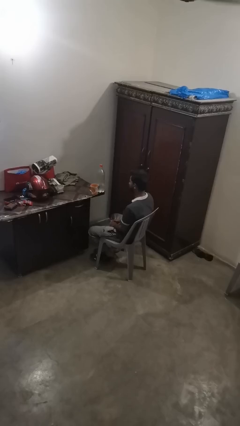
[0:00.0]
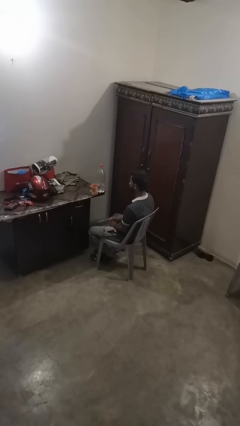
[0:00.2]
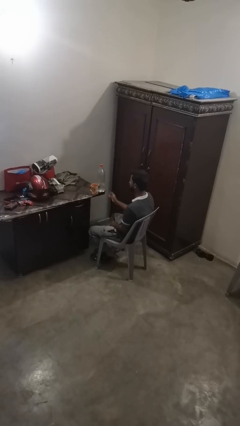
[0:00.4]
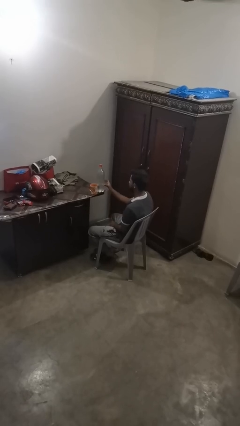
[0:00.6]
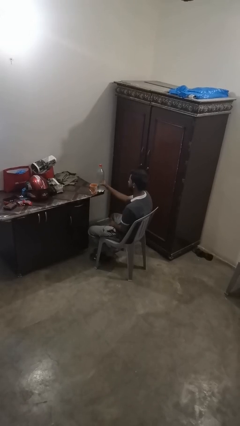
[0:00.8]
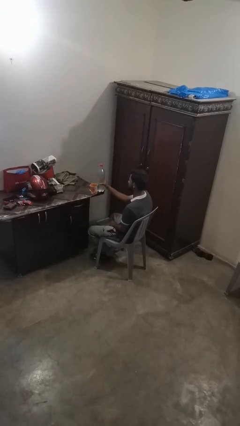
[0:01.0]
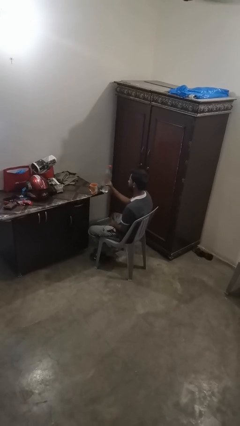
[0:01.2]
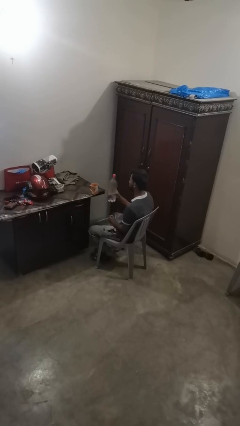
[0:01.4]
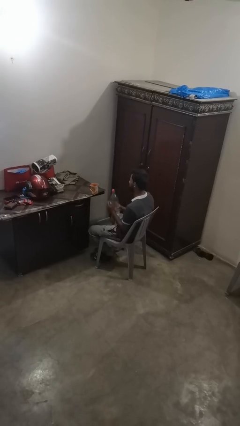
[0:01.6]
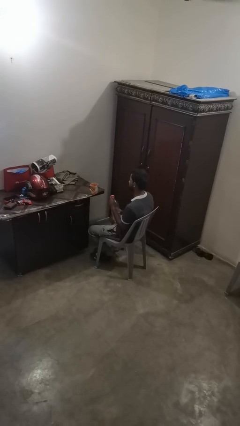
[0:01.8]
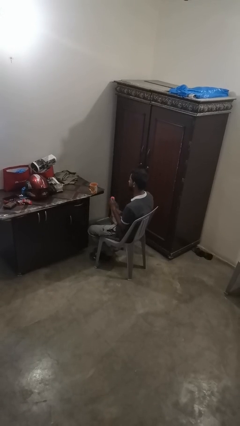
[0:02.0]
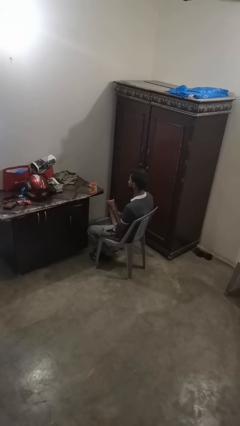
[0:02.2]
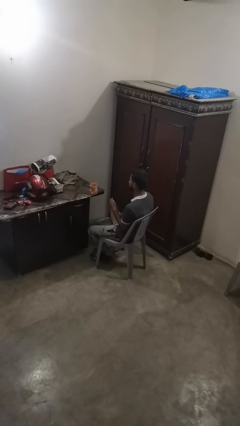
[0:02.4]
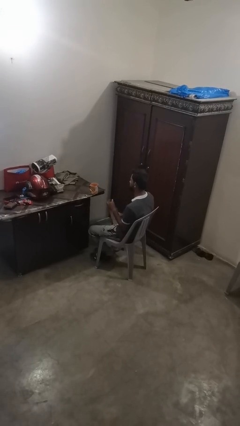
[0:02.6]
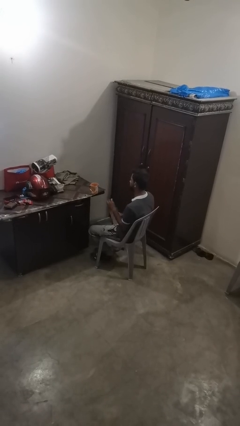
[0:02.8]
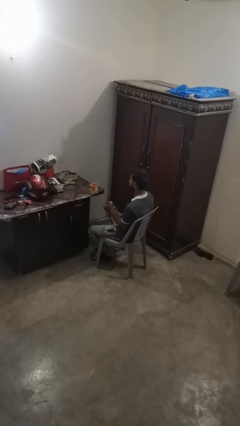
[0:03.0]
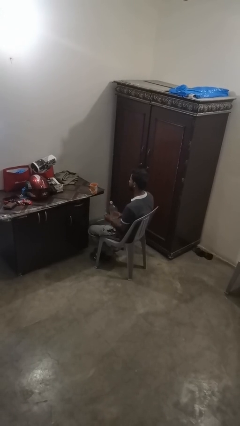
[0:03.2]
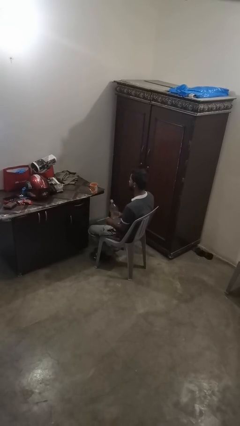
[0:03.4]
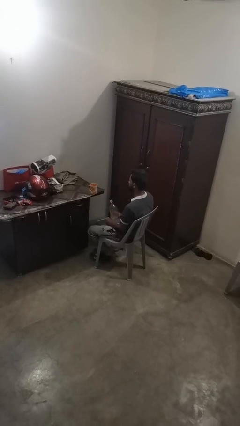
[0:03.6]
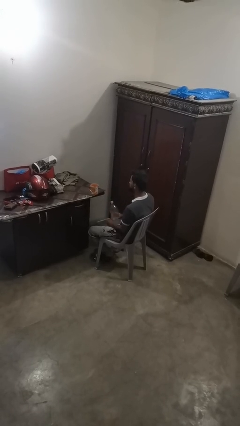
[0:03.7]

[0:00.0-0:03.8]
person unscrews lid from bottle

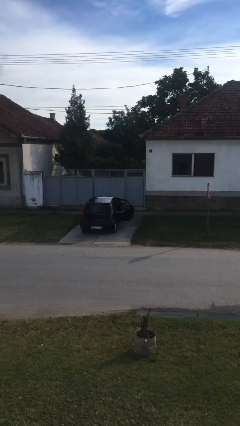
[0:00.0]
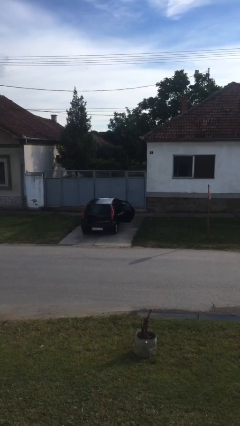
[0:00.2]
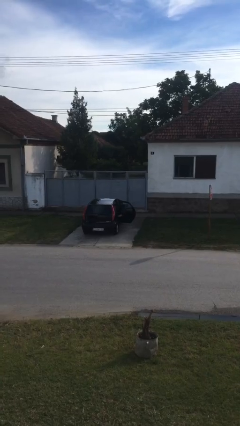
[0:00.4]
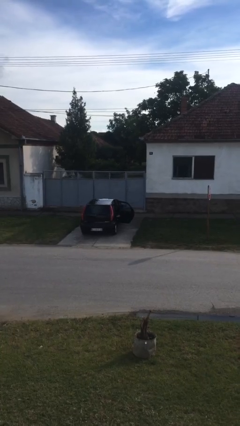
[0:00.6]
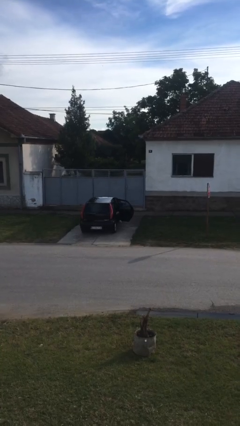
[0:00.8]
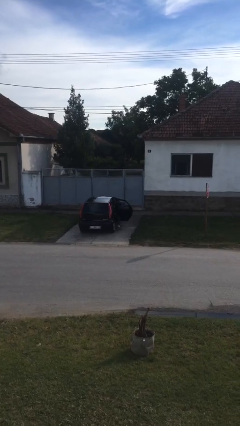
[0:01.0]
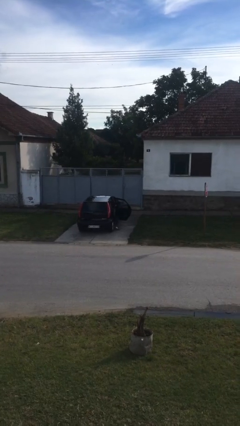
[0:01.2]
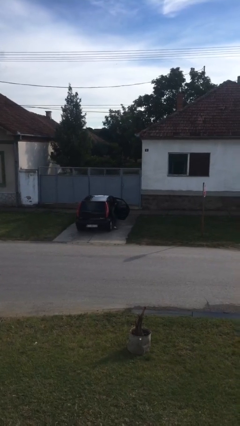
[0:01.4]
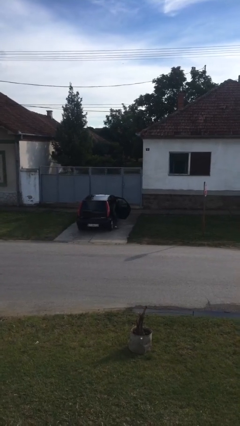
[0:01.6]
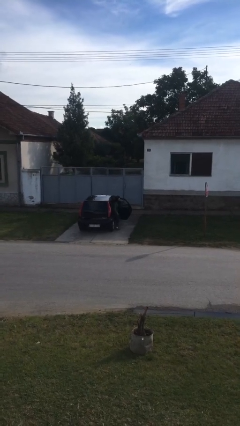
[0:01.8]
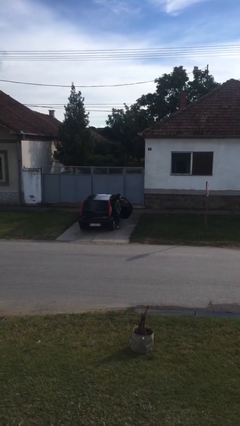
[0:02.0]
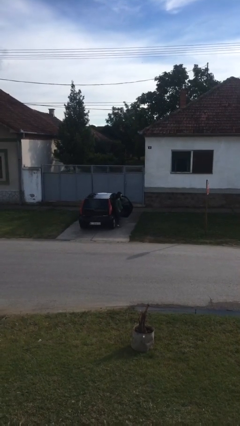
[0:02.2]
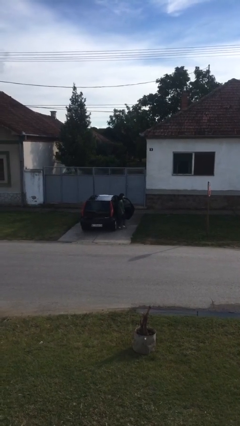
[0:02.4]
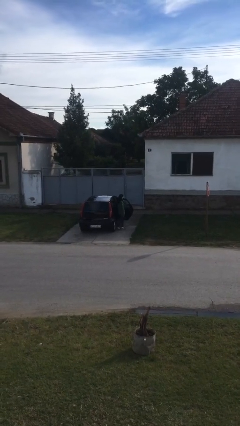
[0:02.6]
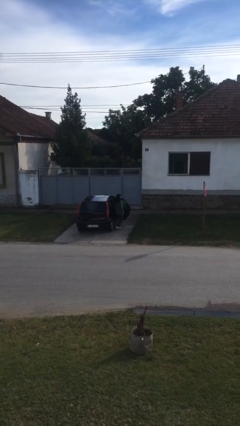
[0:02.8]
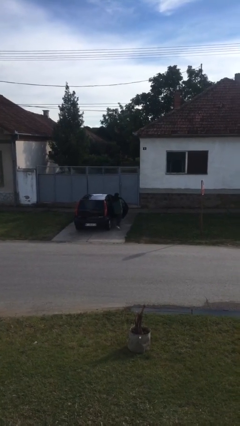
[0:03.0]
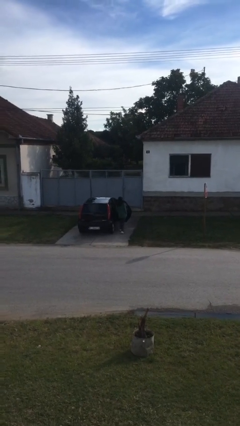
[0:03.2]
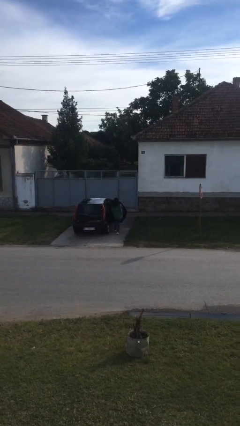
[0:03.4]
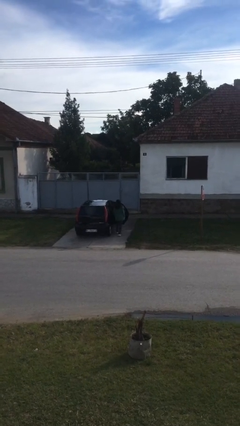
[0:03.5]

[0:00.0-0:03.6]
person exits car

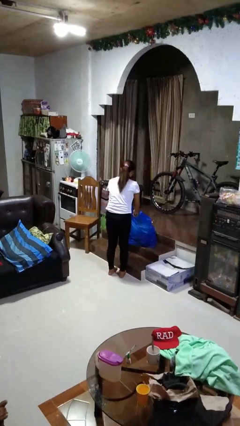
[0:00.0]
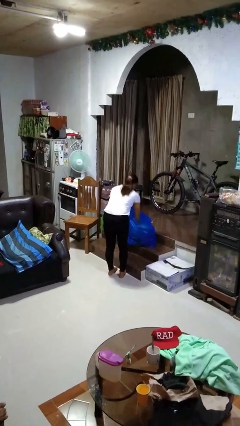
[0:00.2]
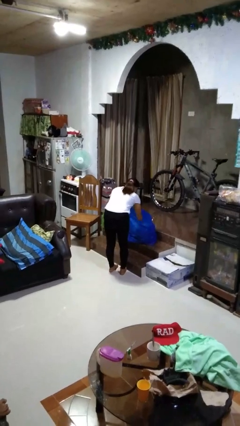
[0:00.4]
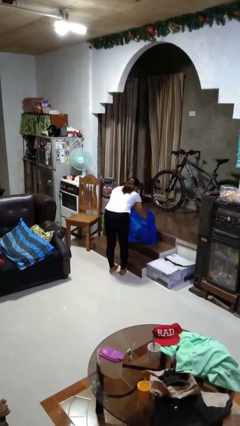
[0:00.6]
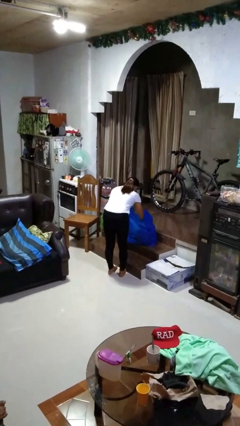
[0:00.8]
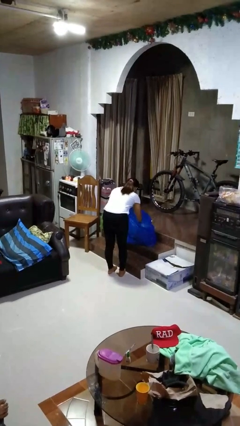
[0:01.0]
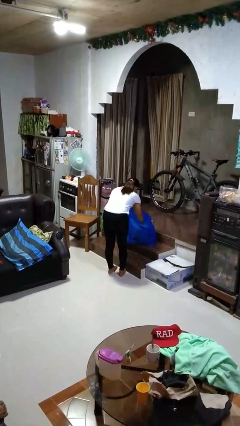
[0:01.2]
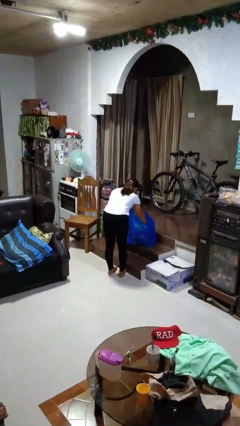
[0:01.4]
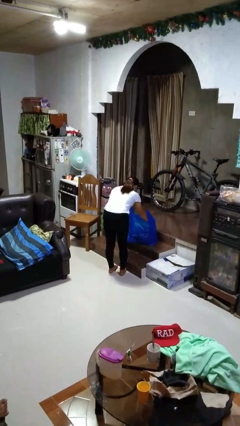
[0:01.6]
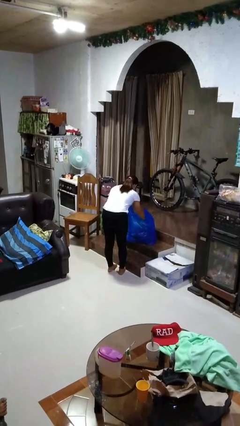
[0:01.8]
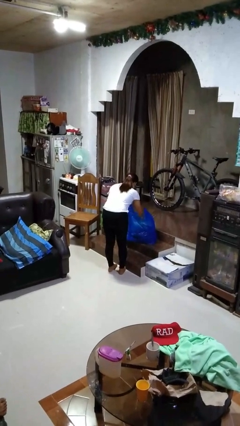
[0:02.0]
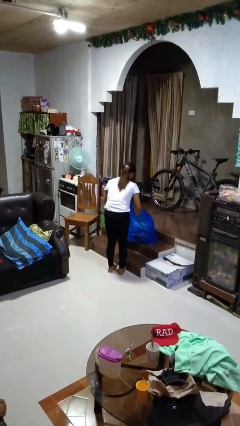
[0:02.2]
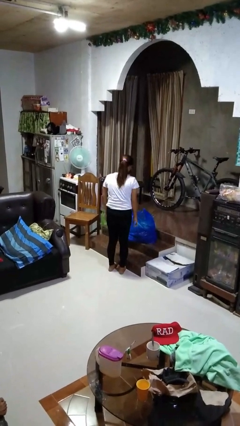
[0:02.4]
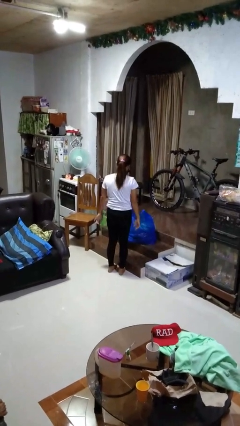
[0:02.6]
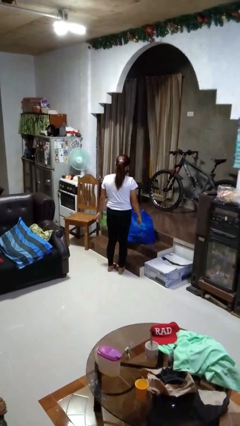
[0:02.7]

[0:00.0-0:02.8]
person searches in bag

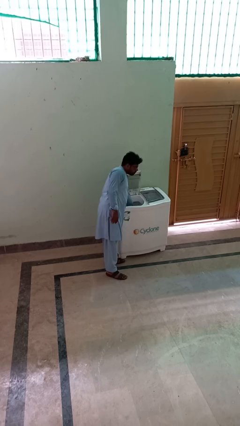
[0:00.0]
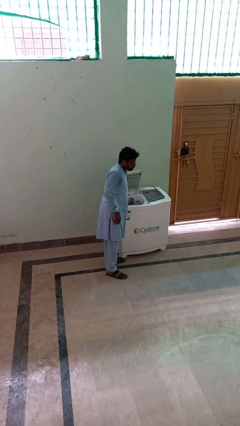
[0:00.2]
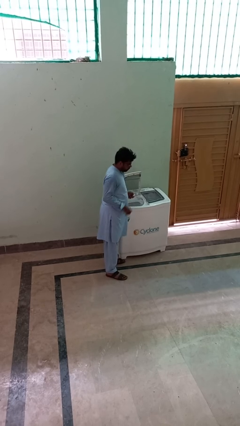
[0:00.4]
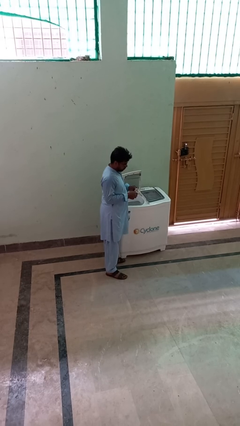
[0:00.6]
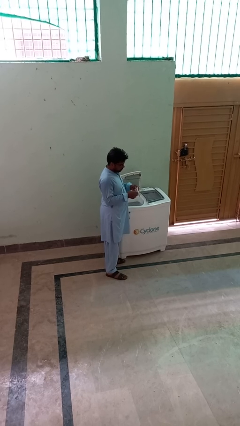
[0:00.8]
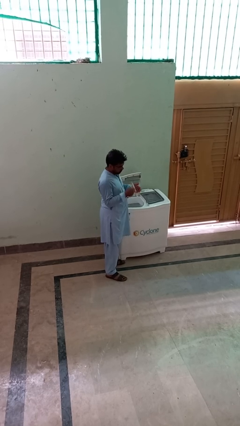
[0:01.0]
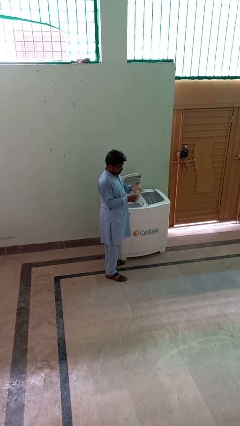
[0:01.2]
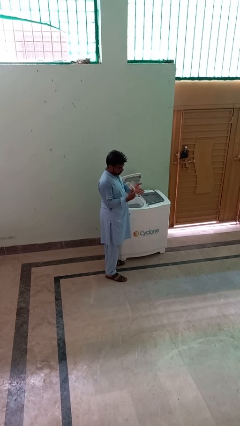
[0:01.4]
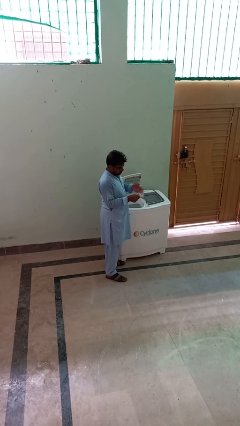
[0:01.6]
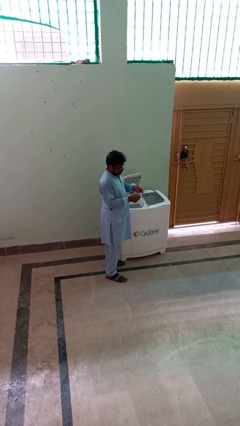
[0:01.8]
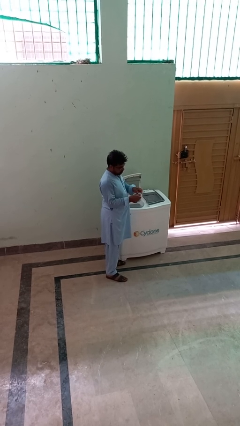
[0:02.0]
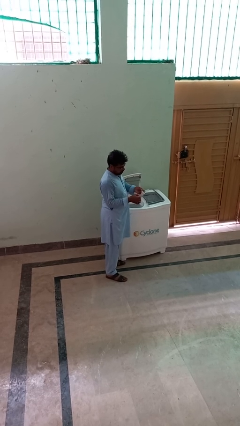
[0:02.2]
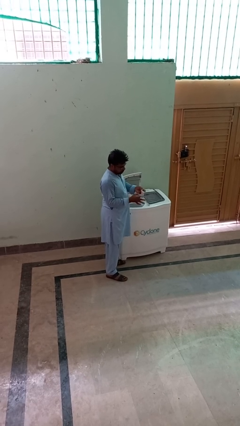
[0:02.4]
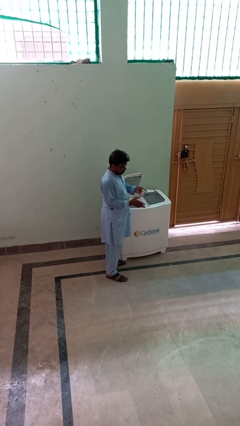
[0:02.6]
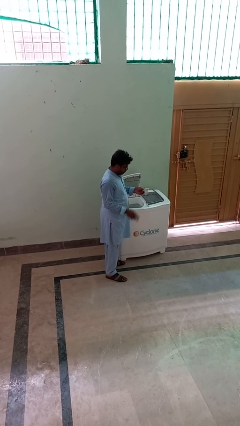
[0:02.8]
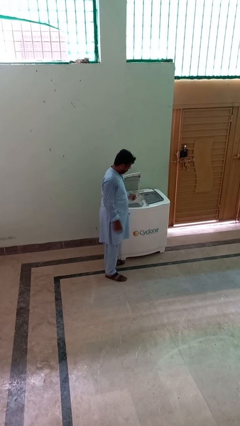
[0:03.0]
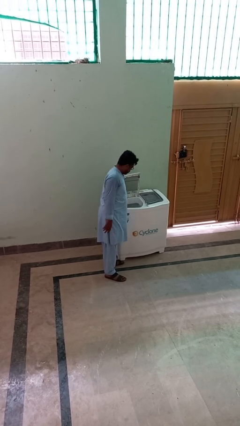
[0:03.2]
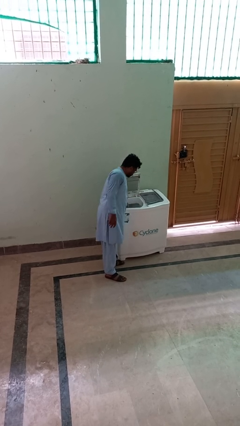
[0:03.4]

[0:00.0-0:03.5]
person cleans dryer lint trap

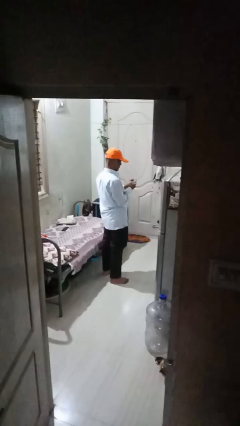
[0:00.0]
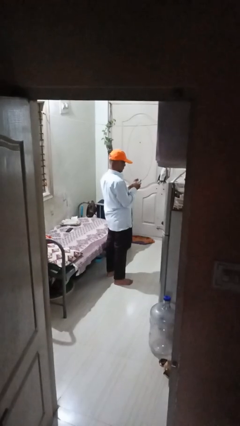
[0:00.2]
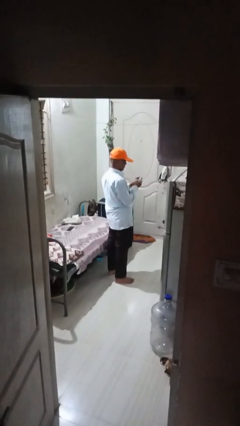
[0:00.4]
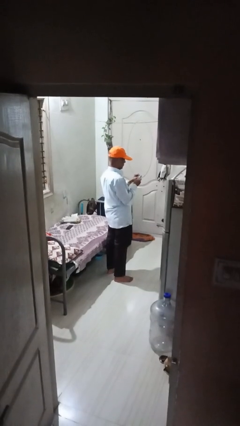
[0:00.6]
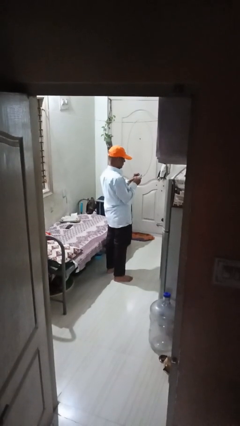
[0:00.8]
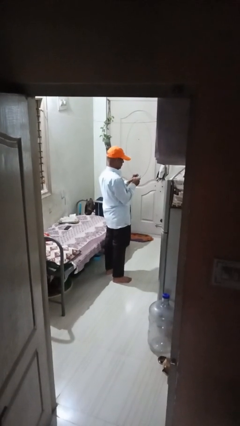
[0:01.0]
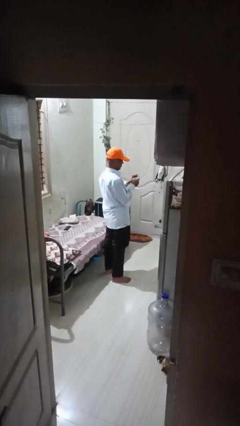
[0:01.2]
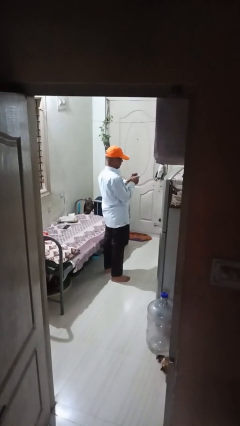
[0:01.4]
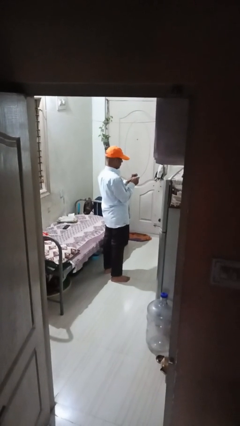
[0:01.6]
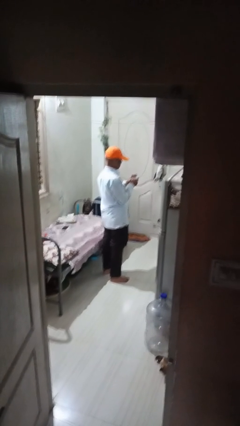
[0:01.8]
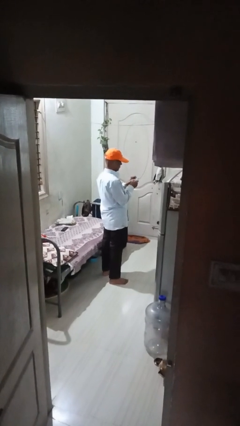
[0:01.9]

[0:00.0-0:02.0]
person files fingernails

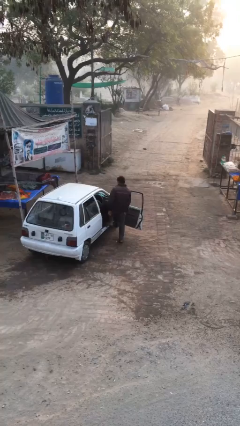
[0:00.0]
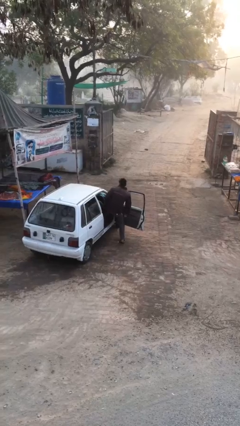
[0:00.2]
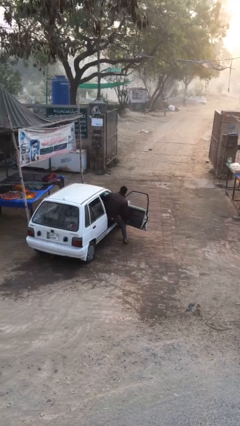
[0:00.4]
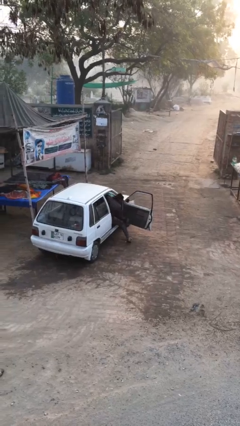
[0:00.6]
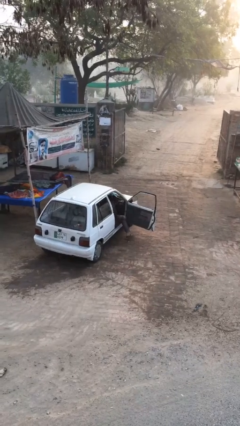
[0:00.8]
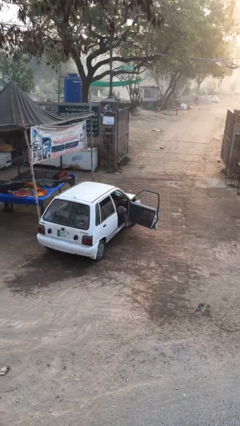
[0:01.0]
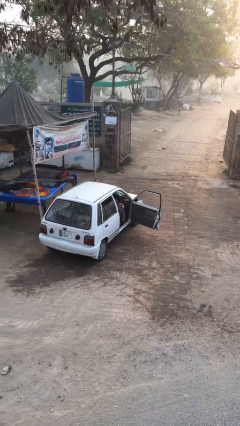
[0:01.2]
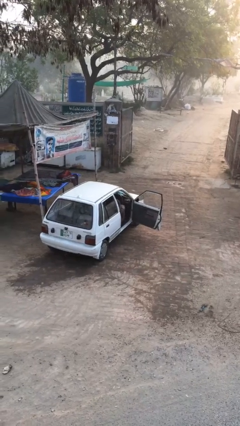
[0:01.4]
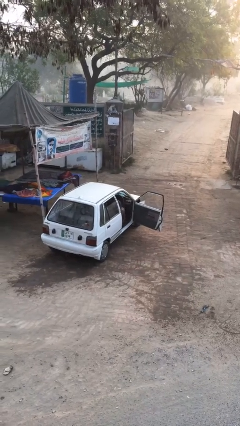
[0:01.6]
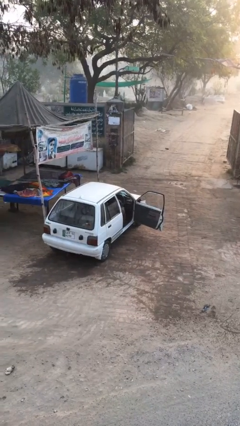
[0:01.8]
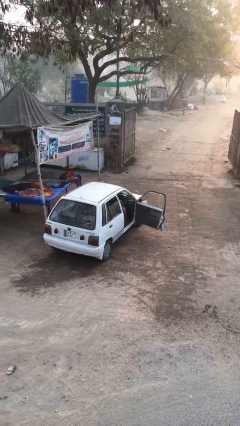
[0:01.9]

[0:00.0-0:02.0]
person enters car
